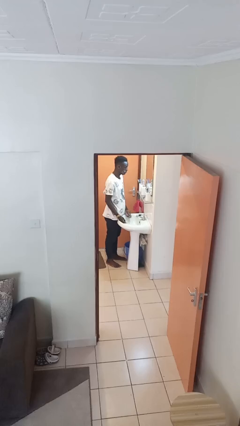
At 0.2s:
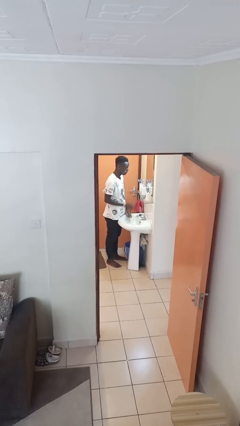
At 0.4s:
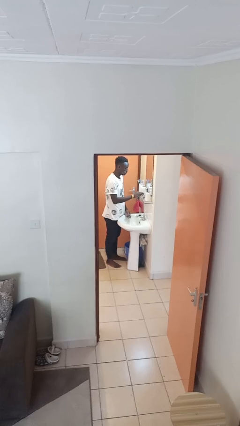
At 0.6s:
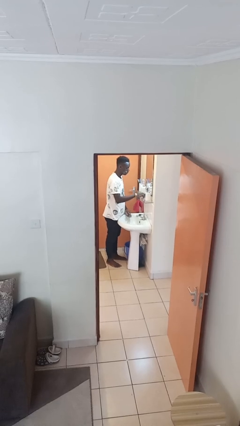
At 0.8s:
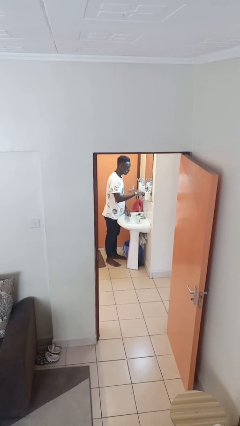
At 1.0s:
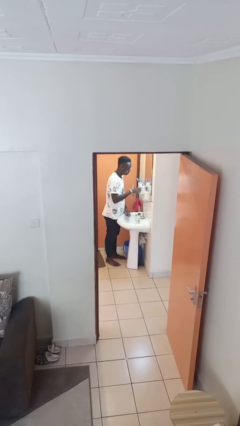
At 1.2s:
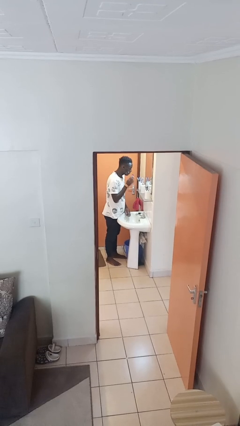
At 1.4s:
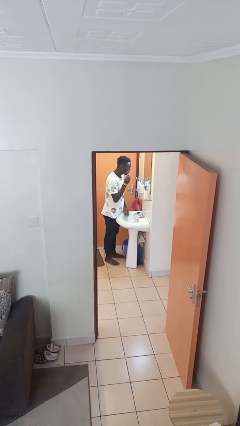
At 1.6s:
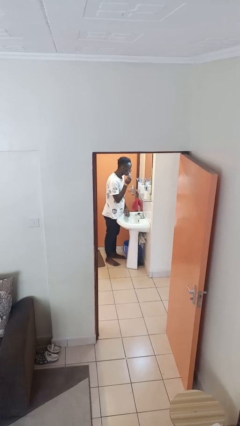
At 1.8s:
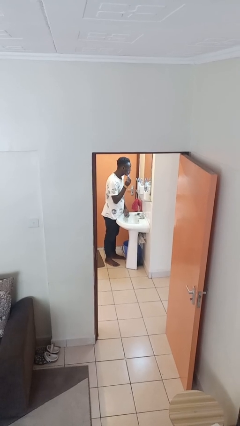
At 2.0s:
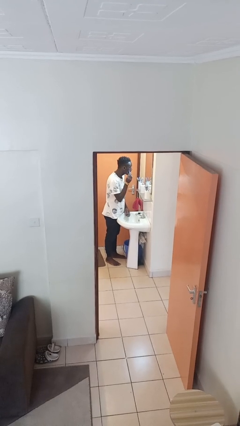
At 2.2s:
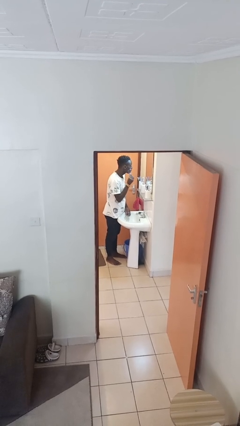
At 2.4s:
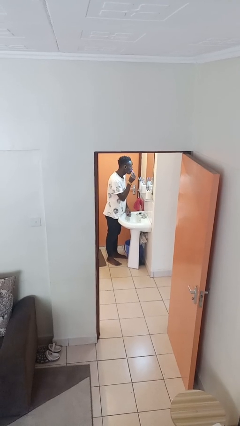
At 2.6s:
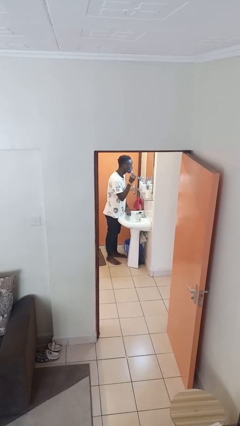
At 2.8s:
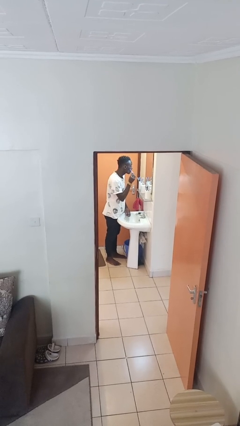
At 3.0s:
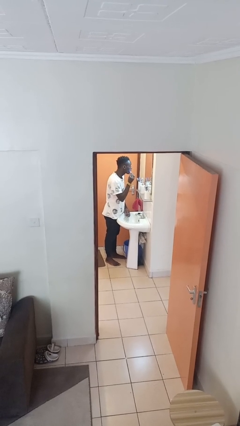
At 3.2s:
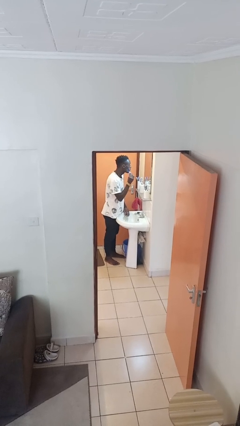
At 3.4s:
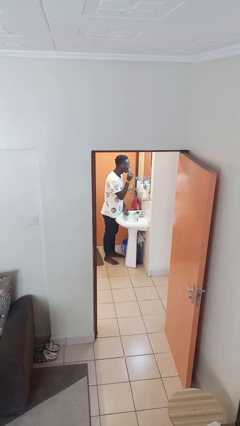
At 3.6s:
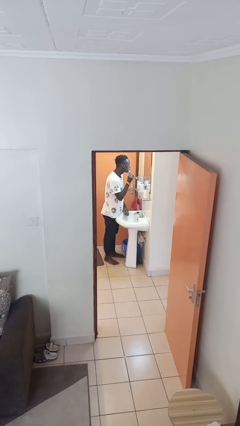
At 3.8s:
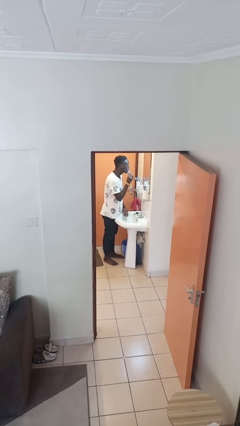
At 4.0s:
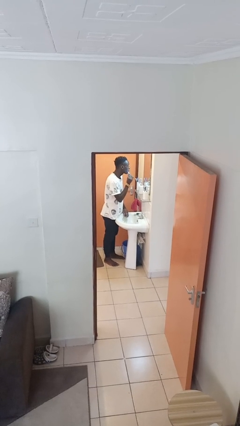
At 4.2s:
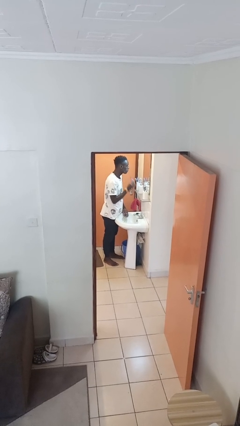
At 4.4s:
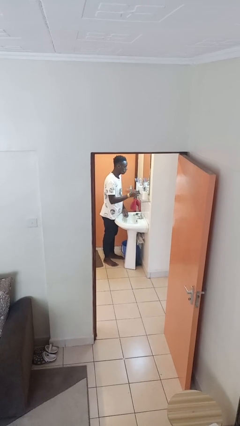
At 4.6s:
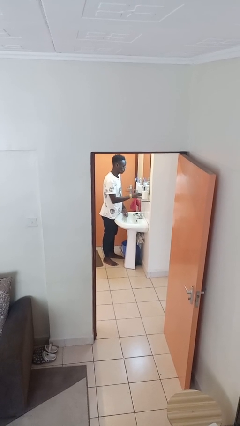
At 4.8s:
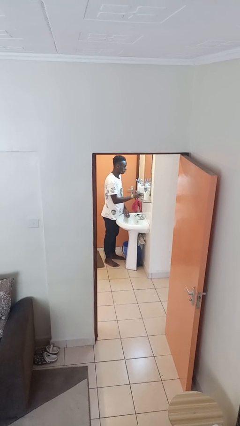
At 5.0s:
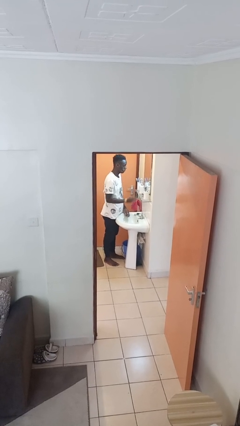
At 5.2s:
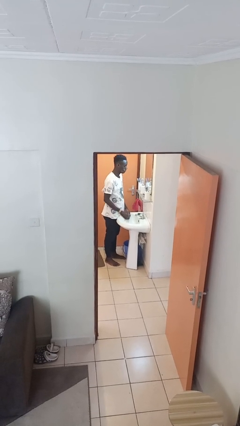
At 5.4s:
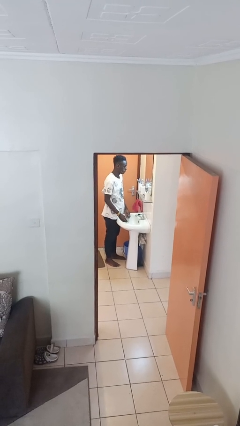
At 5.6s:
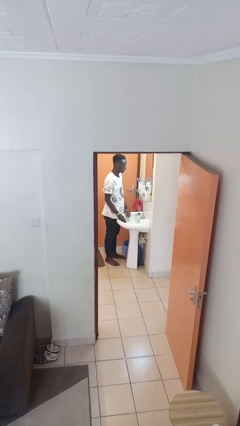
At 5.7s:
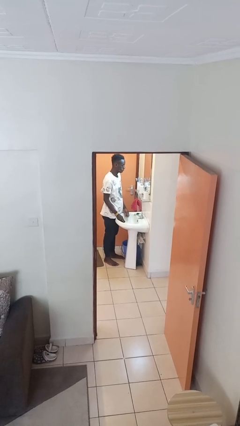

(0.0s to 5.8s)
person shaves face

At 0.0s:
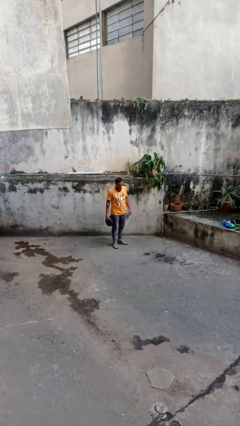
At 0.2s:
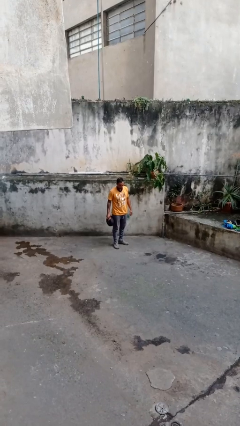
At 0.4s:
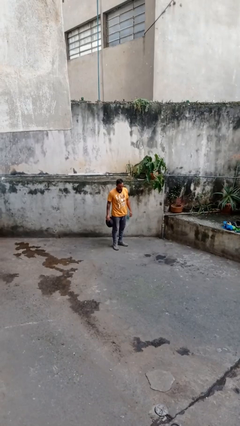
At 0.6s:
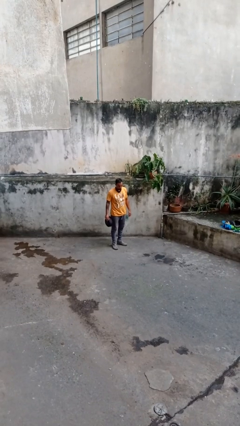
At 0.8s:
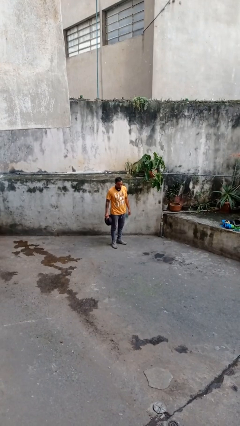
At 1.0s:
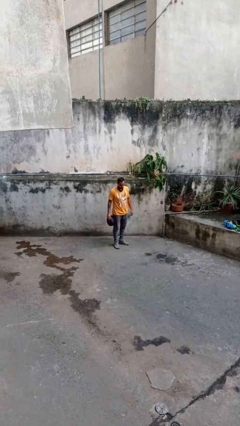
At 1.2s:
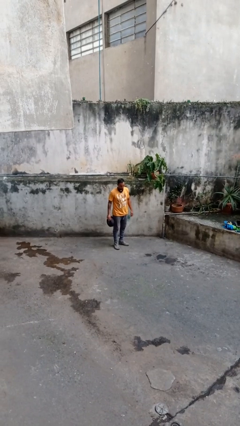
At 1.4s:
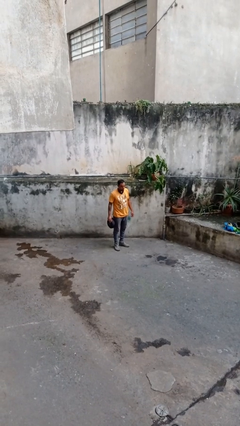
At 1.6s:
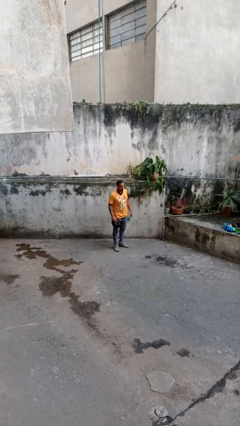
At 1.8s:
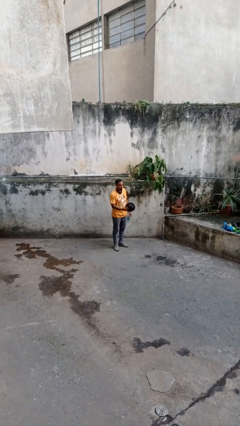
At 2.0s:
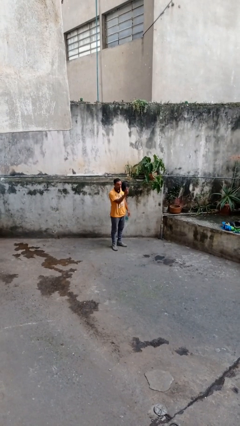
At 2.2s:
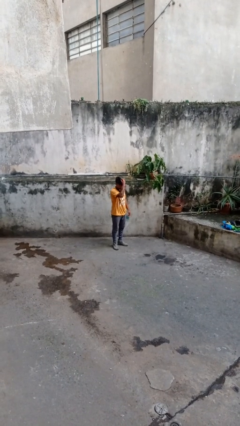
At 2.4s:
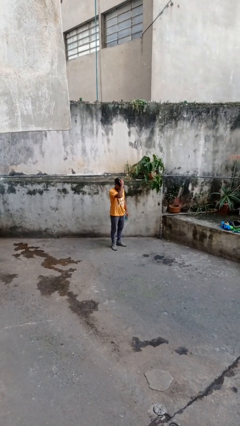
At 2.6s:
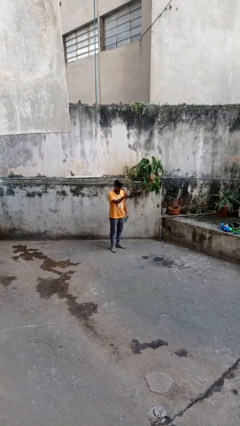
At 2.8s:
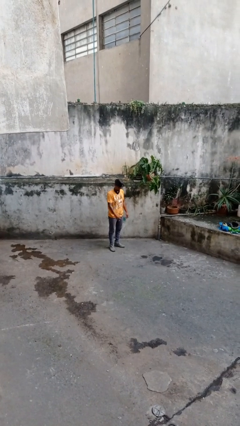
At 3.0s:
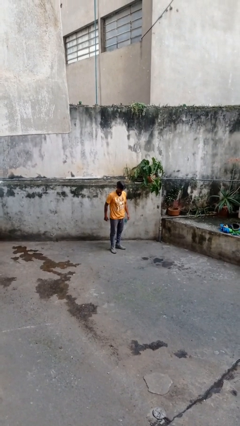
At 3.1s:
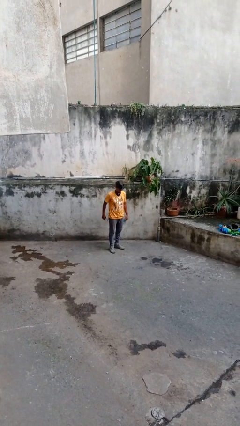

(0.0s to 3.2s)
person puts on hat

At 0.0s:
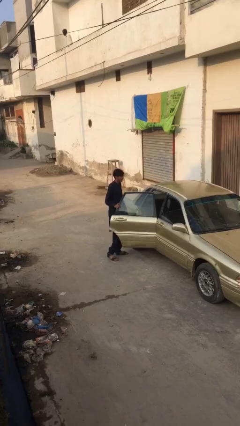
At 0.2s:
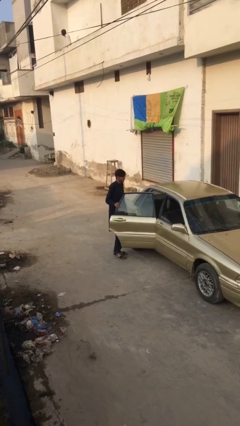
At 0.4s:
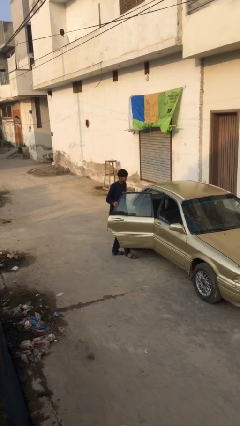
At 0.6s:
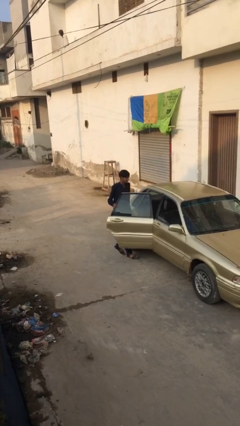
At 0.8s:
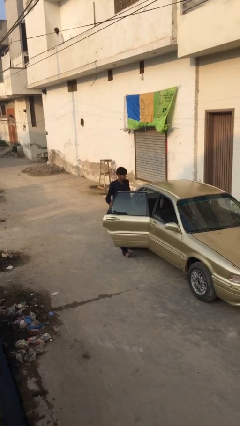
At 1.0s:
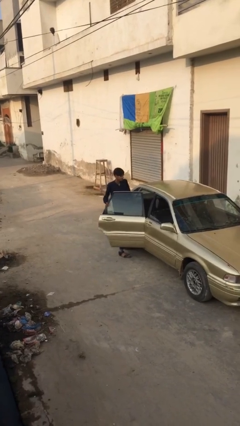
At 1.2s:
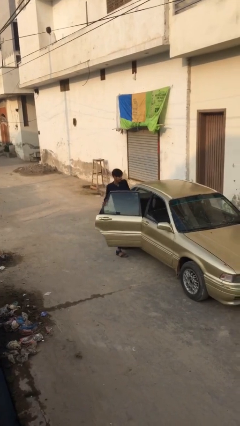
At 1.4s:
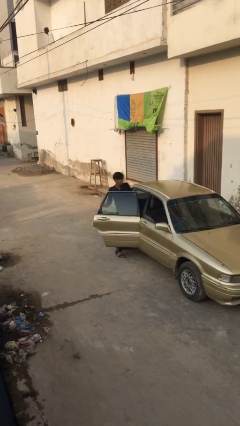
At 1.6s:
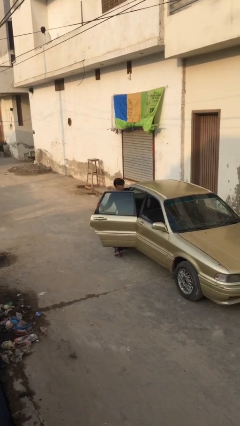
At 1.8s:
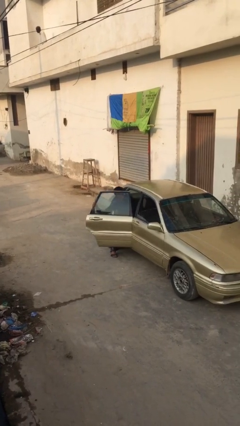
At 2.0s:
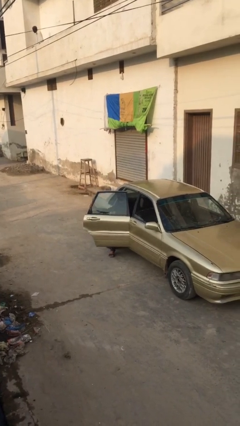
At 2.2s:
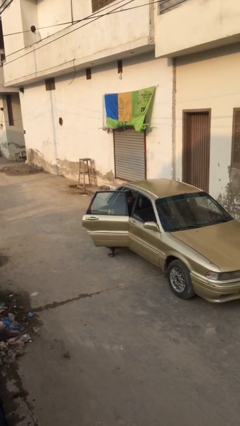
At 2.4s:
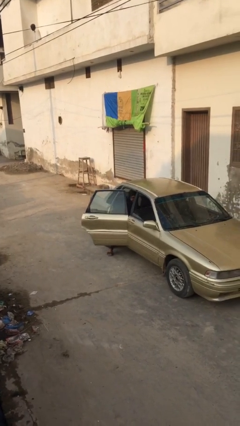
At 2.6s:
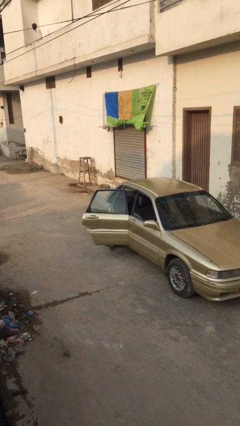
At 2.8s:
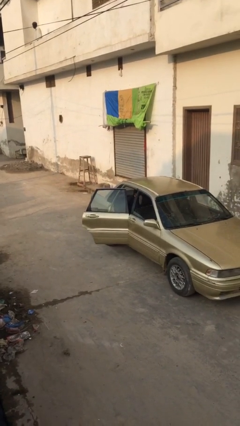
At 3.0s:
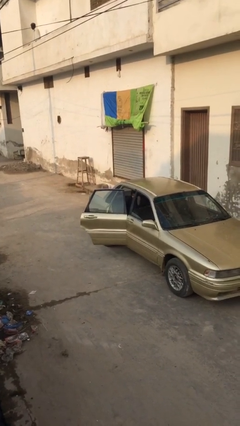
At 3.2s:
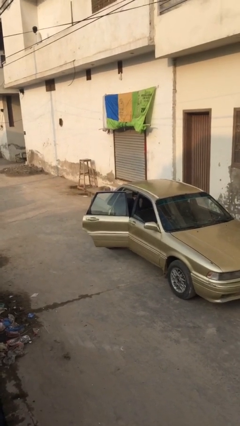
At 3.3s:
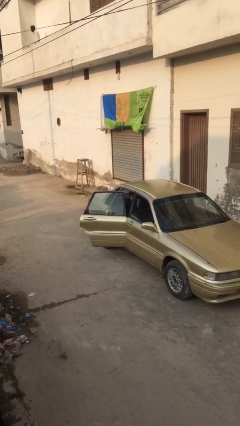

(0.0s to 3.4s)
person enters car

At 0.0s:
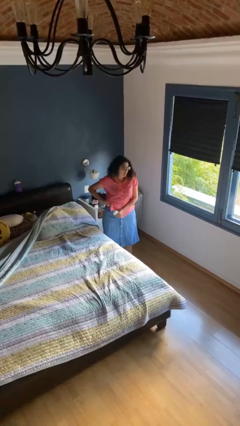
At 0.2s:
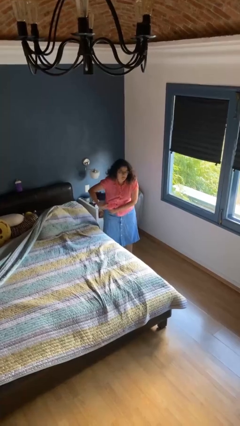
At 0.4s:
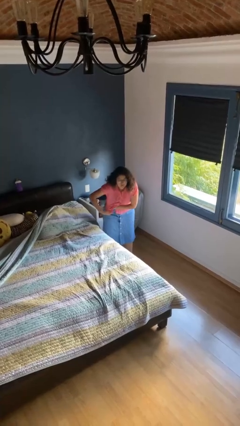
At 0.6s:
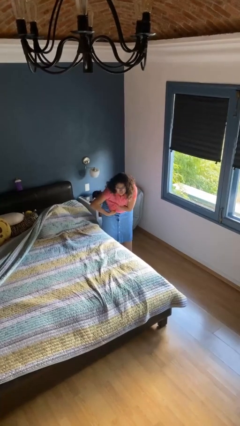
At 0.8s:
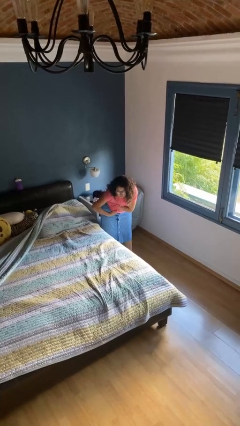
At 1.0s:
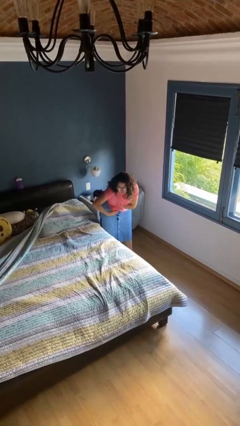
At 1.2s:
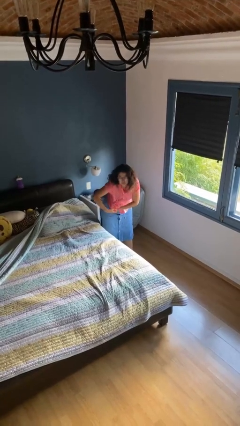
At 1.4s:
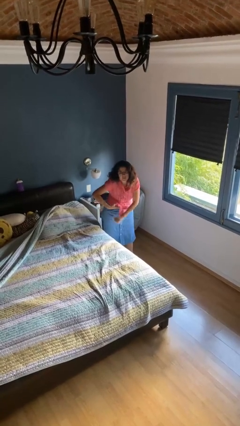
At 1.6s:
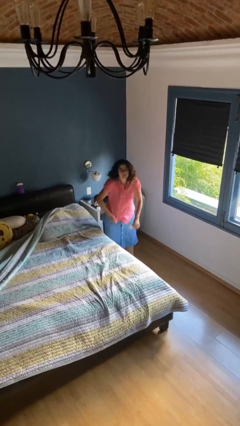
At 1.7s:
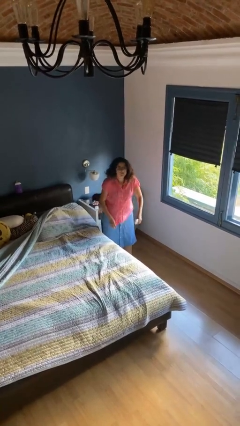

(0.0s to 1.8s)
person applies deodorant

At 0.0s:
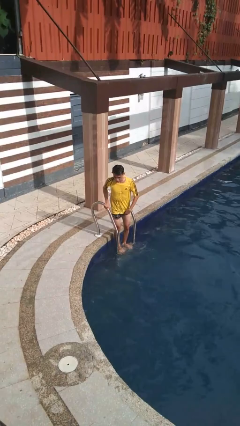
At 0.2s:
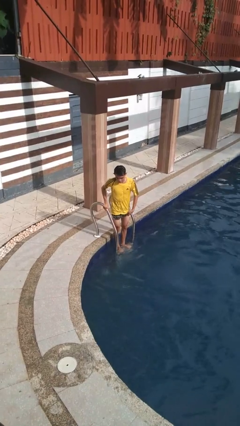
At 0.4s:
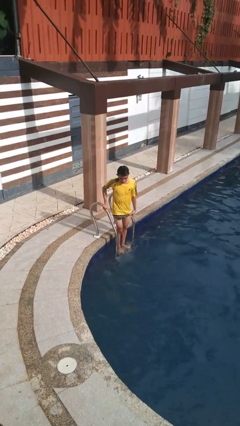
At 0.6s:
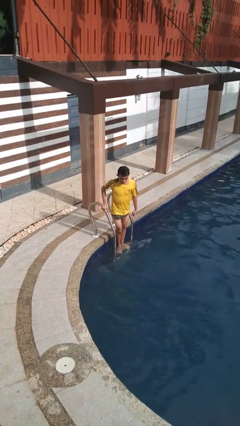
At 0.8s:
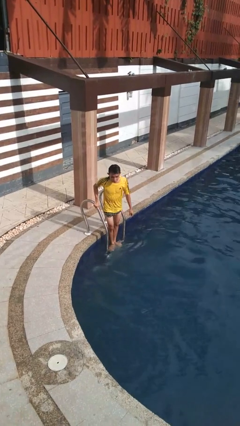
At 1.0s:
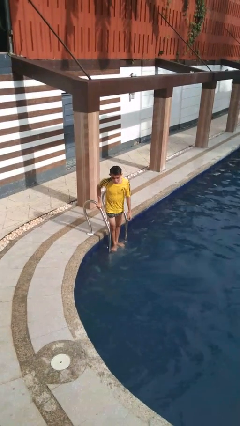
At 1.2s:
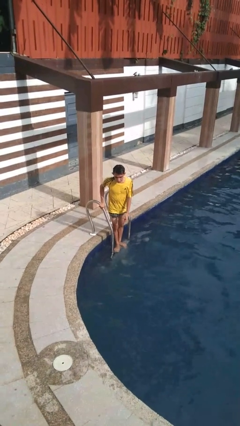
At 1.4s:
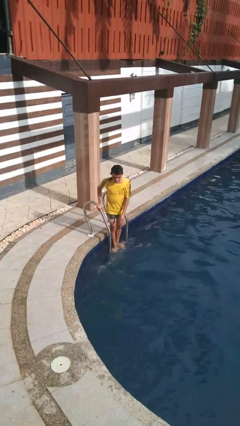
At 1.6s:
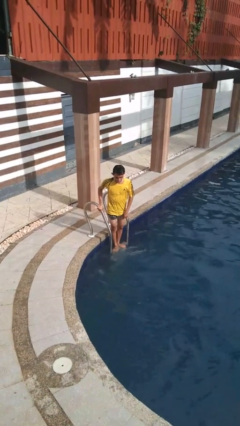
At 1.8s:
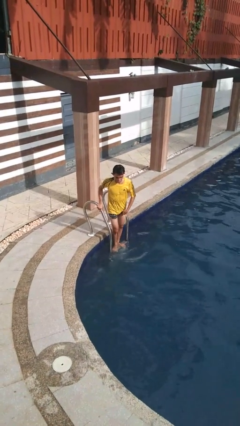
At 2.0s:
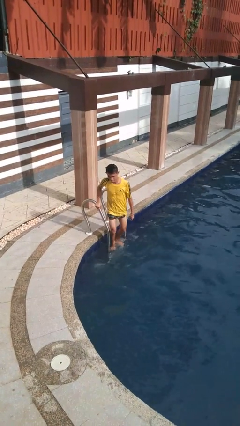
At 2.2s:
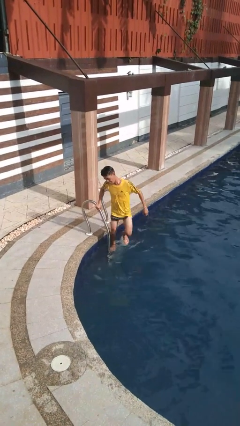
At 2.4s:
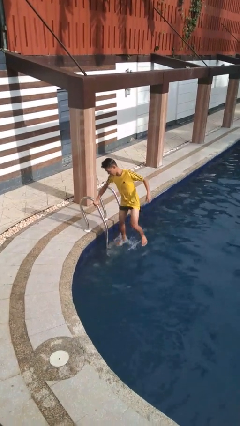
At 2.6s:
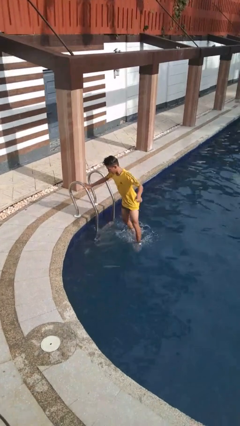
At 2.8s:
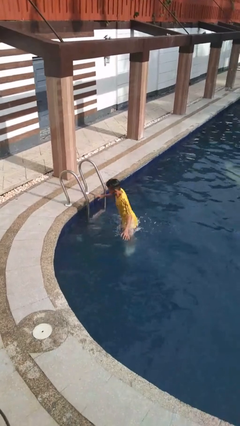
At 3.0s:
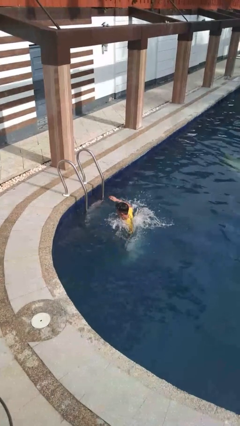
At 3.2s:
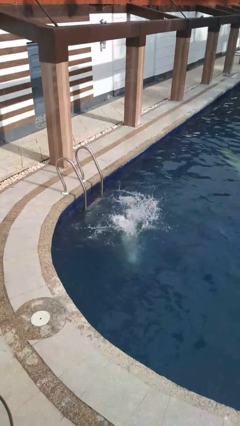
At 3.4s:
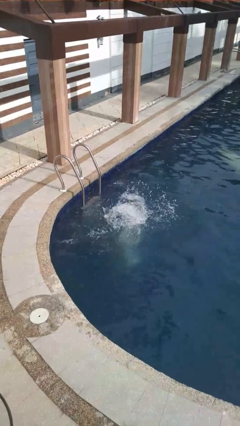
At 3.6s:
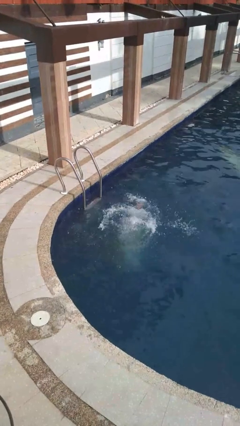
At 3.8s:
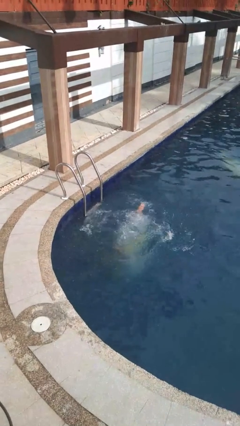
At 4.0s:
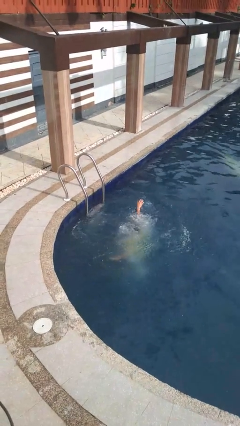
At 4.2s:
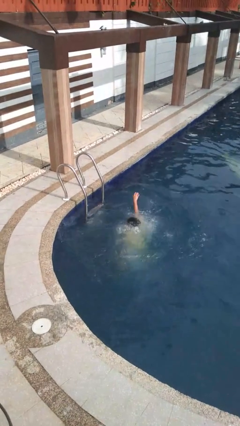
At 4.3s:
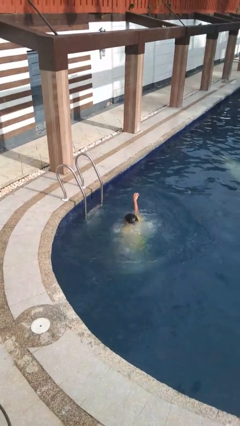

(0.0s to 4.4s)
person jumps into pool
